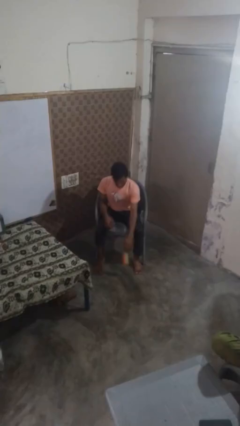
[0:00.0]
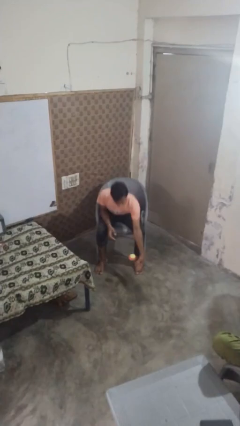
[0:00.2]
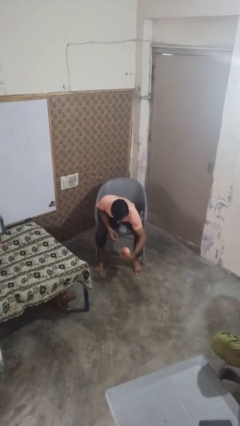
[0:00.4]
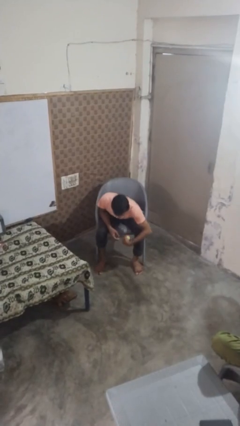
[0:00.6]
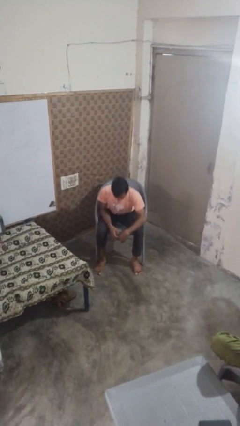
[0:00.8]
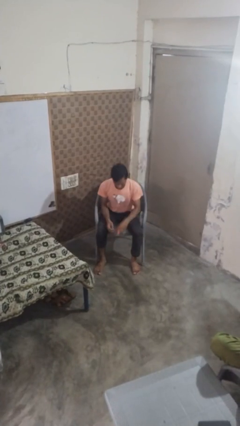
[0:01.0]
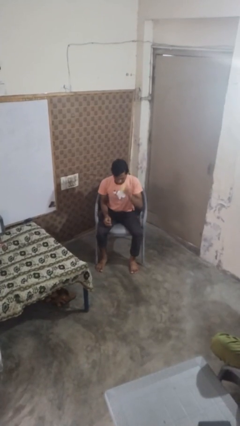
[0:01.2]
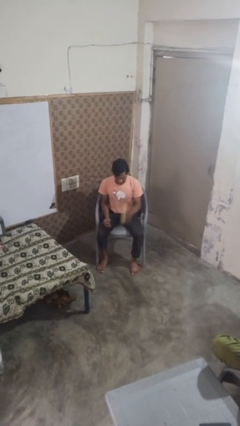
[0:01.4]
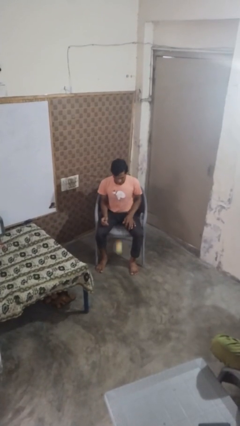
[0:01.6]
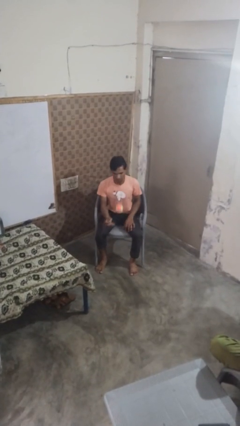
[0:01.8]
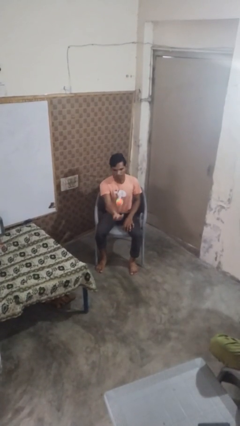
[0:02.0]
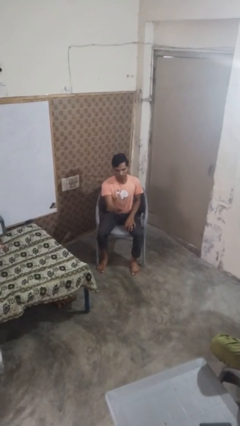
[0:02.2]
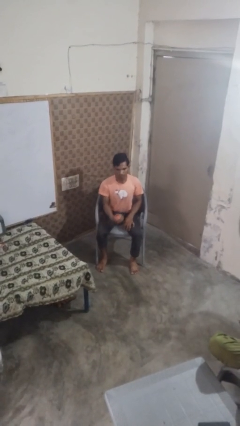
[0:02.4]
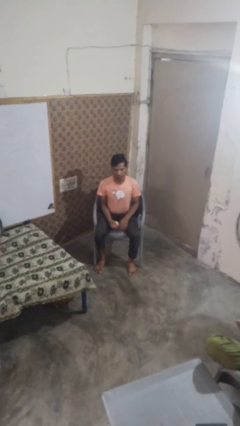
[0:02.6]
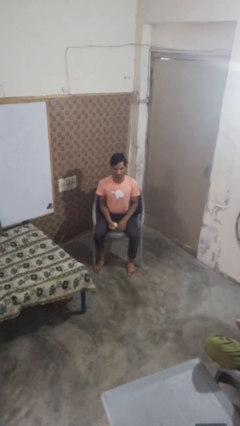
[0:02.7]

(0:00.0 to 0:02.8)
person bounces ball on floor

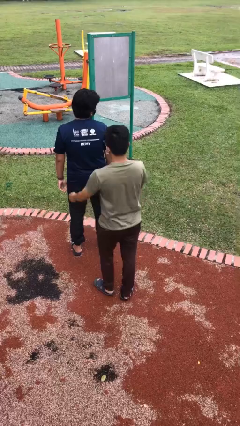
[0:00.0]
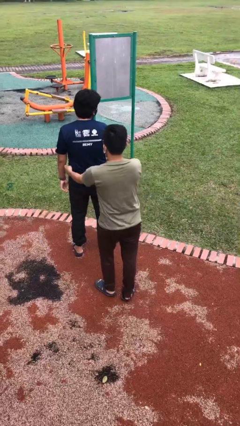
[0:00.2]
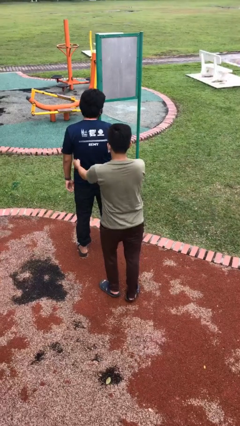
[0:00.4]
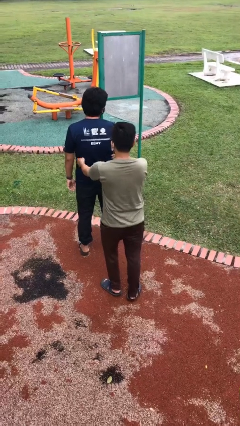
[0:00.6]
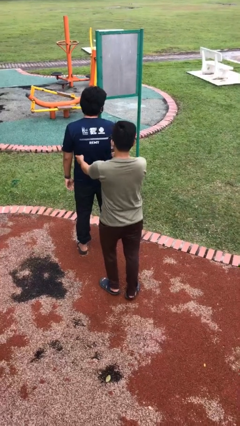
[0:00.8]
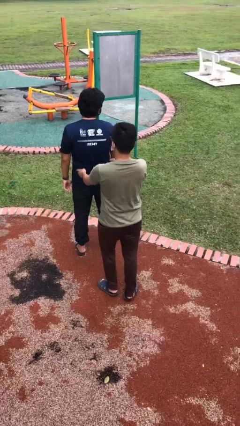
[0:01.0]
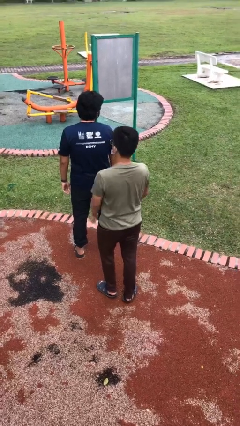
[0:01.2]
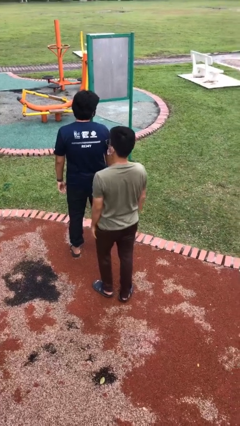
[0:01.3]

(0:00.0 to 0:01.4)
person tickles person

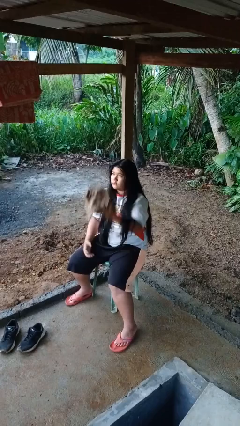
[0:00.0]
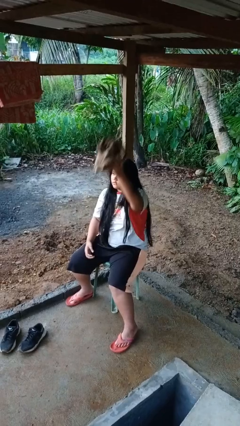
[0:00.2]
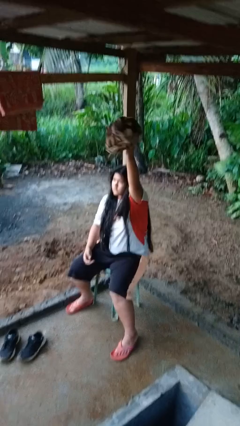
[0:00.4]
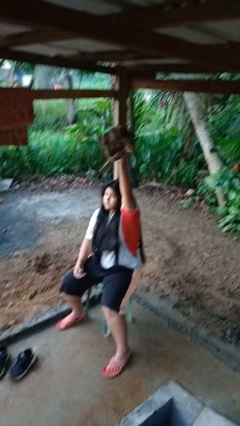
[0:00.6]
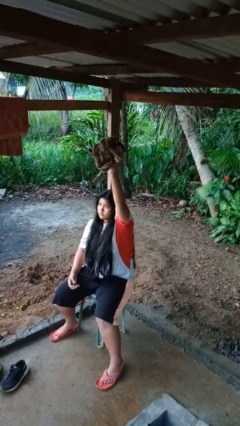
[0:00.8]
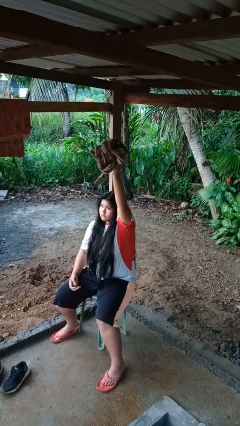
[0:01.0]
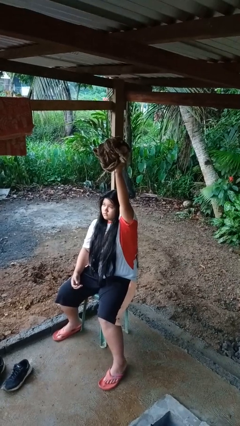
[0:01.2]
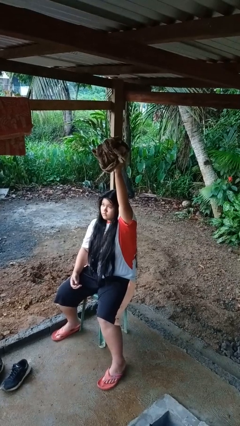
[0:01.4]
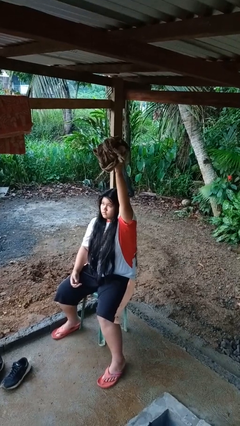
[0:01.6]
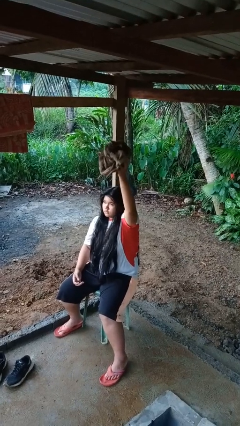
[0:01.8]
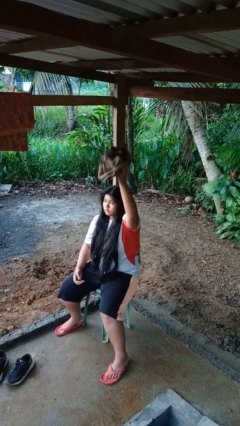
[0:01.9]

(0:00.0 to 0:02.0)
person holds object above head

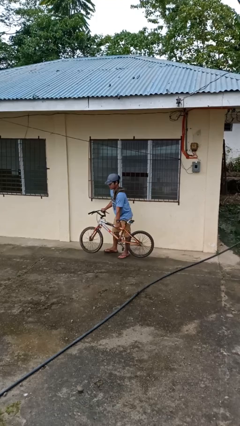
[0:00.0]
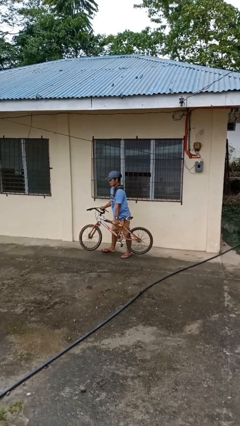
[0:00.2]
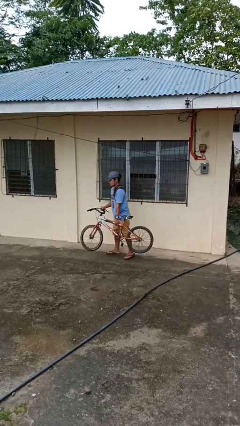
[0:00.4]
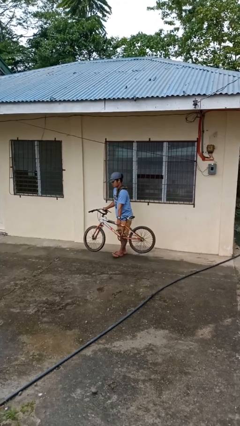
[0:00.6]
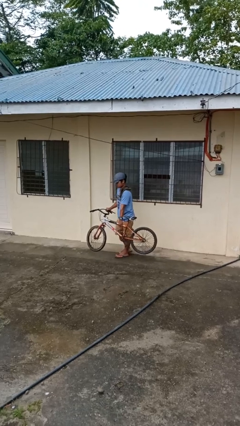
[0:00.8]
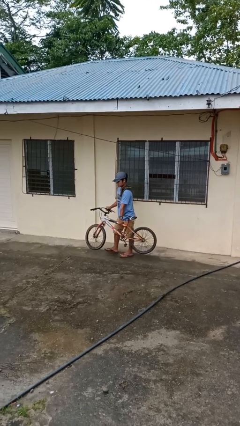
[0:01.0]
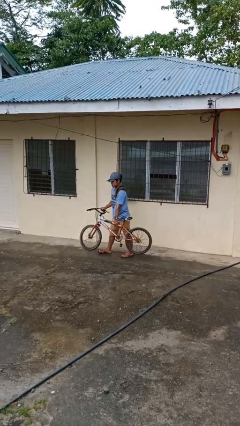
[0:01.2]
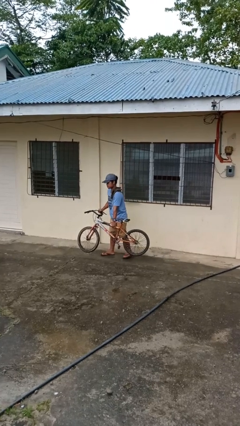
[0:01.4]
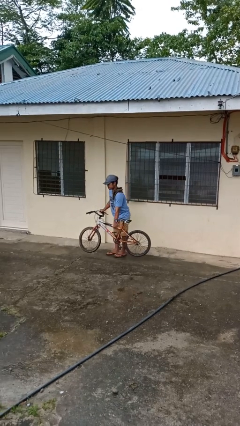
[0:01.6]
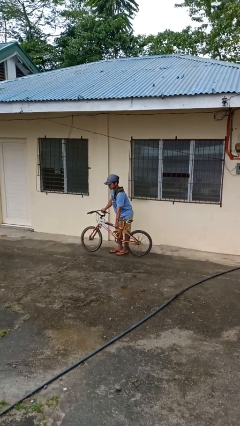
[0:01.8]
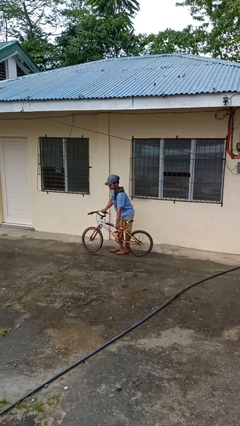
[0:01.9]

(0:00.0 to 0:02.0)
person carries bicycle

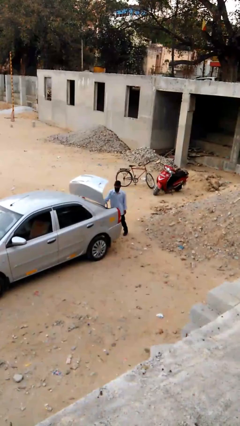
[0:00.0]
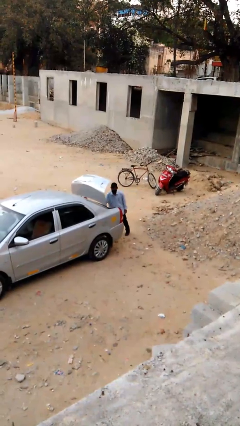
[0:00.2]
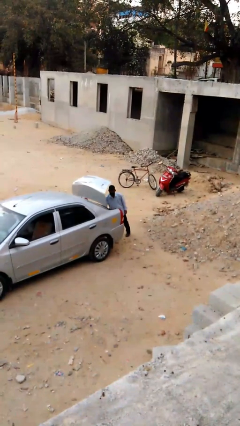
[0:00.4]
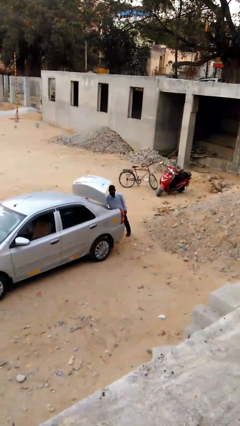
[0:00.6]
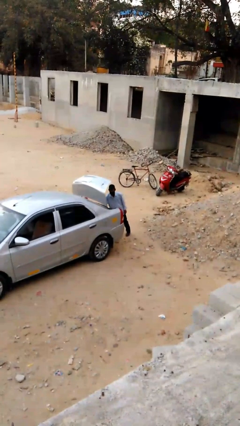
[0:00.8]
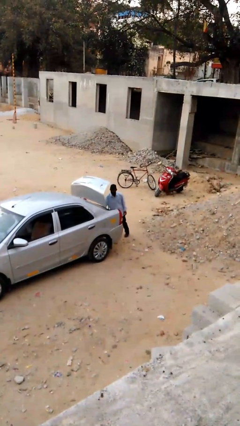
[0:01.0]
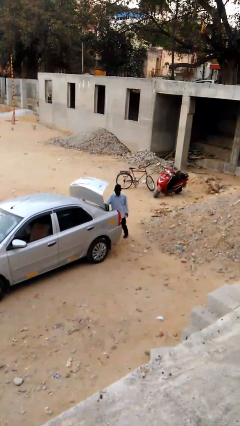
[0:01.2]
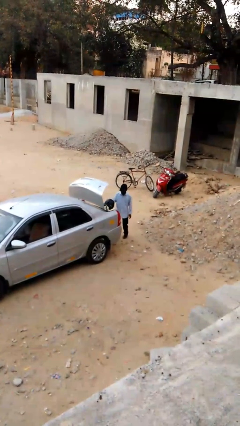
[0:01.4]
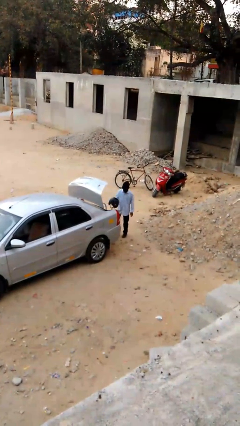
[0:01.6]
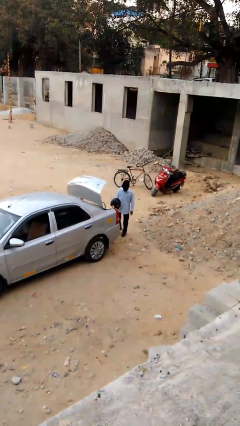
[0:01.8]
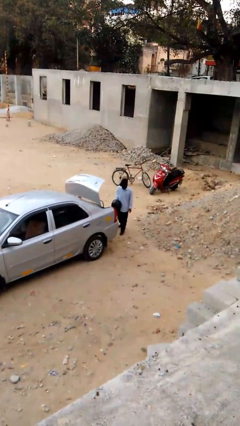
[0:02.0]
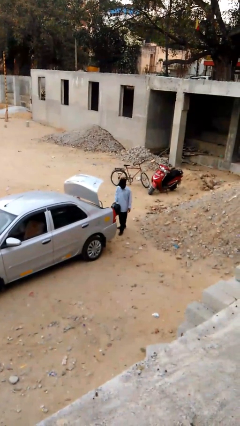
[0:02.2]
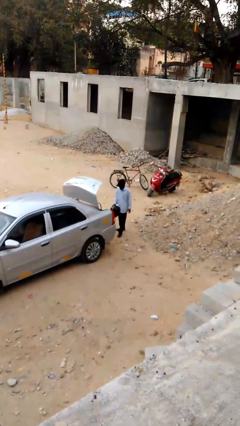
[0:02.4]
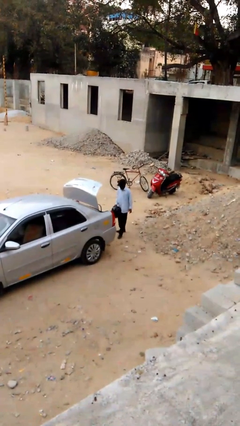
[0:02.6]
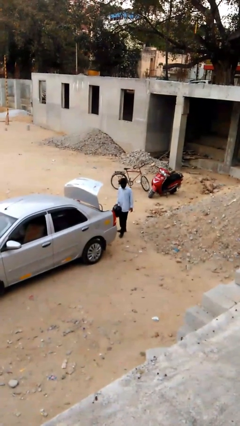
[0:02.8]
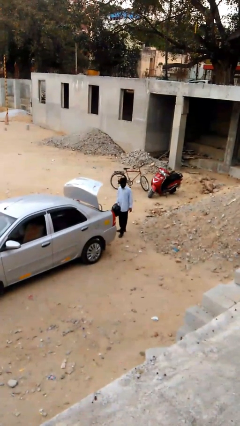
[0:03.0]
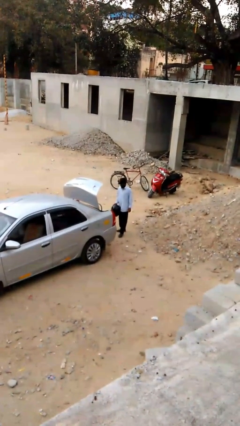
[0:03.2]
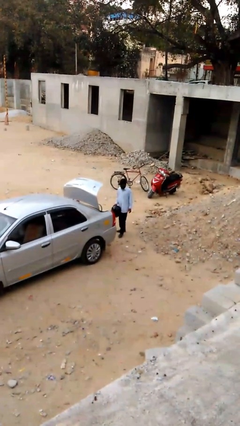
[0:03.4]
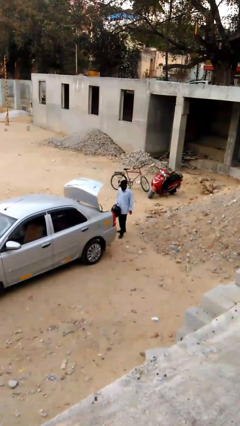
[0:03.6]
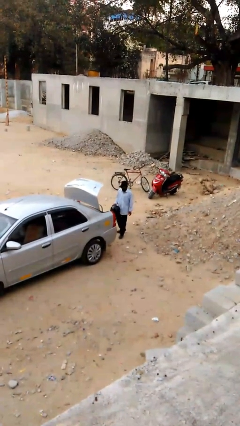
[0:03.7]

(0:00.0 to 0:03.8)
person unloads car

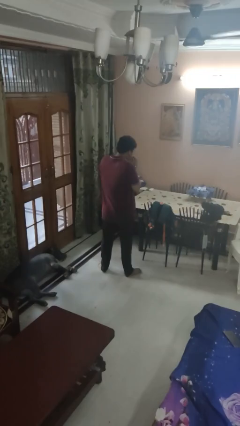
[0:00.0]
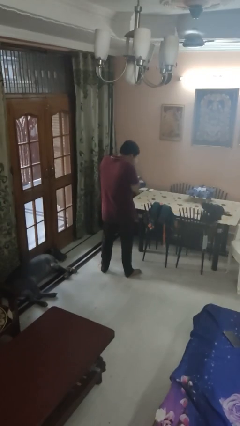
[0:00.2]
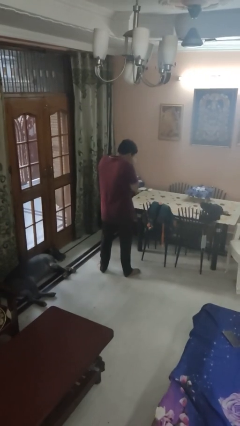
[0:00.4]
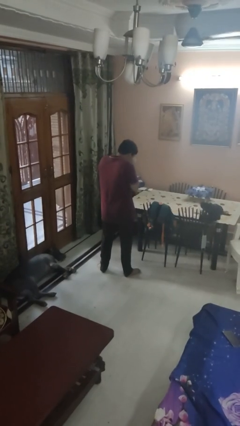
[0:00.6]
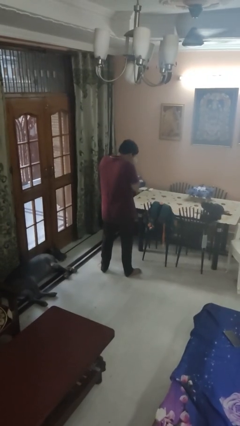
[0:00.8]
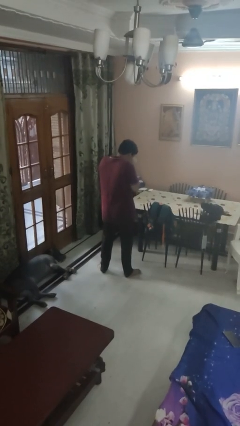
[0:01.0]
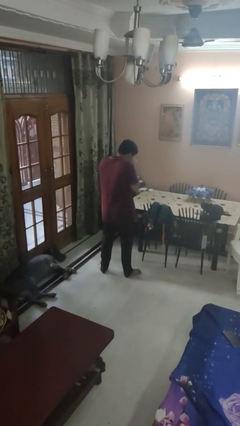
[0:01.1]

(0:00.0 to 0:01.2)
person sneezes into hand

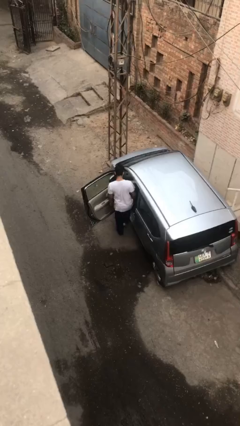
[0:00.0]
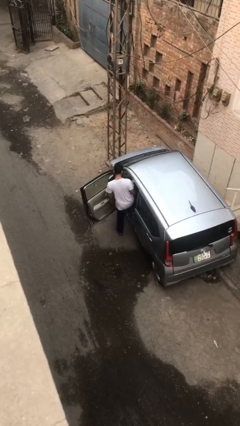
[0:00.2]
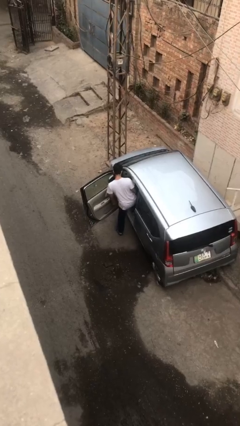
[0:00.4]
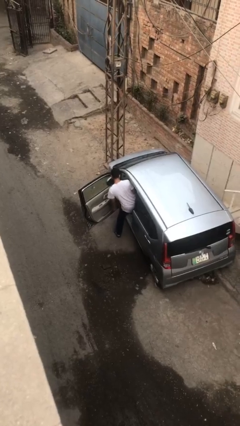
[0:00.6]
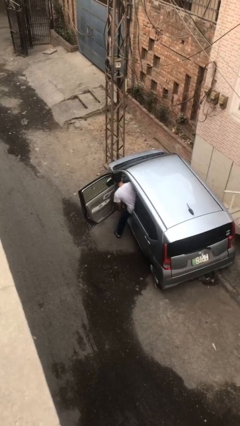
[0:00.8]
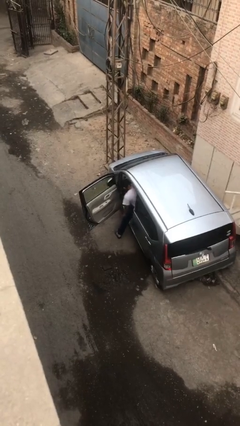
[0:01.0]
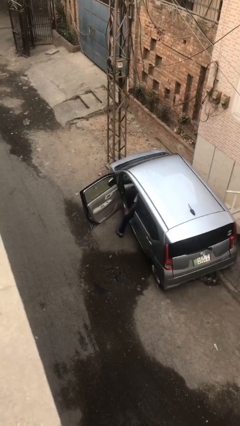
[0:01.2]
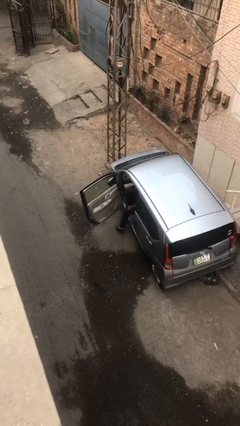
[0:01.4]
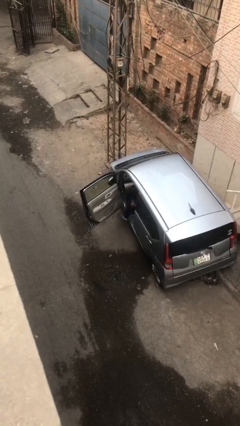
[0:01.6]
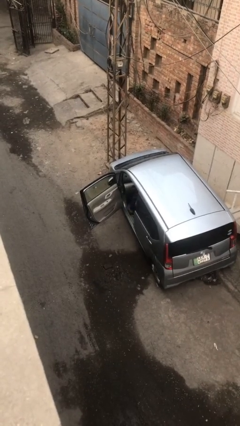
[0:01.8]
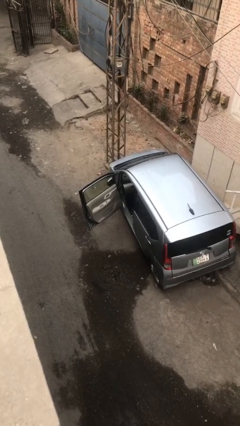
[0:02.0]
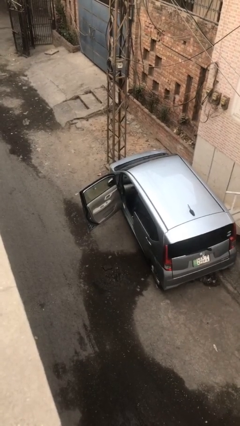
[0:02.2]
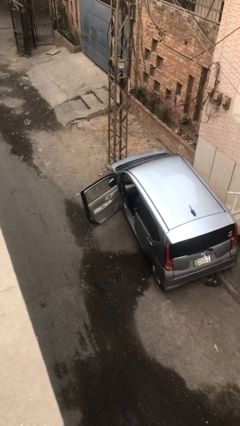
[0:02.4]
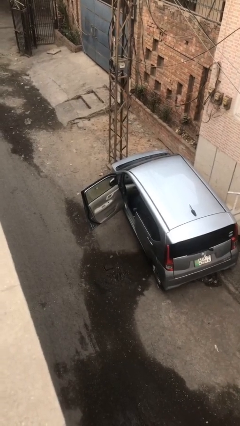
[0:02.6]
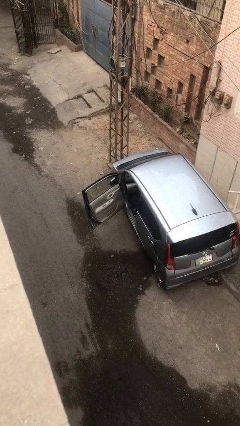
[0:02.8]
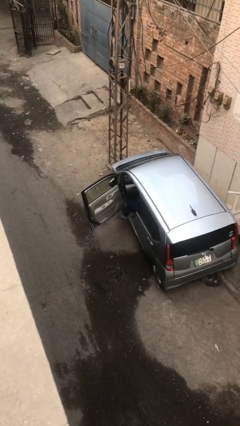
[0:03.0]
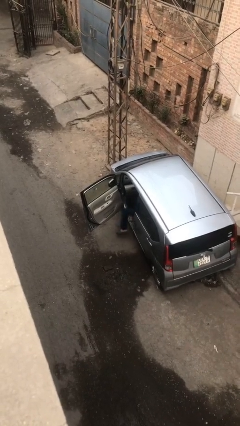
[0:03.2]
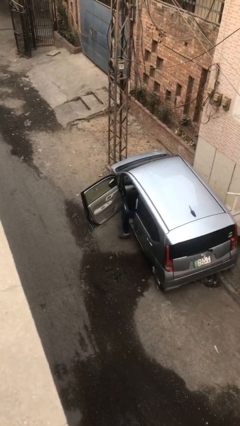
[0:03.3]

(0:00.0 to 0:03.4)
person enters car

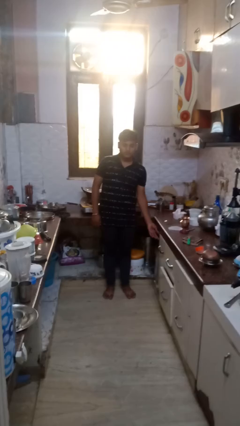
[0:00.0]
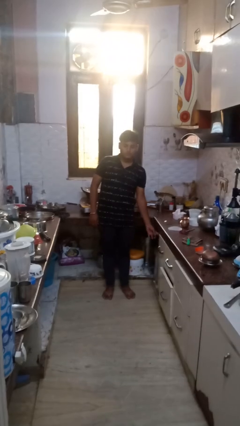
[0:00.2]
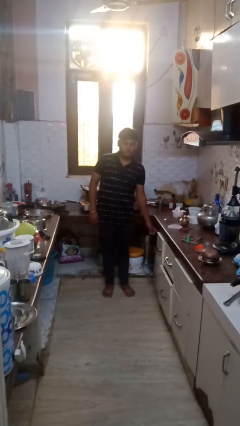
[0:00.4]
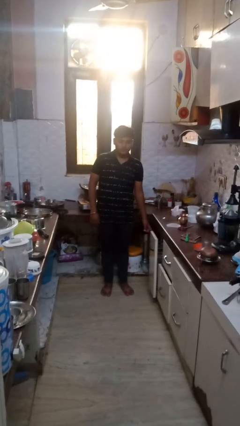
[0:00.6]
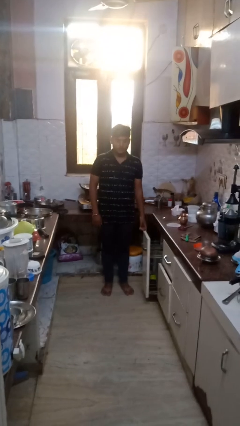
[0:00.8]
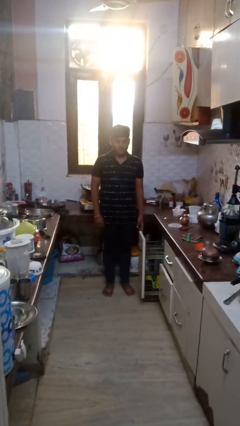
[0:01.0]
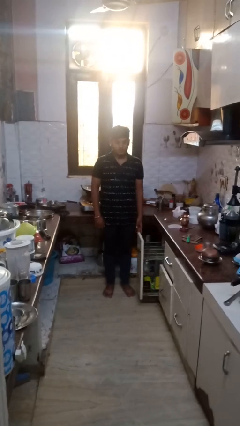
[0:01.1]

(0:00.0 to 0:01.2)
person opens dishwasher
